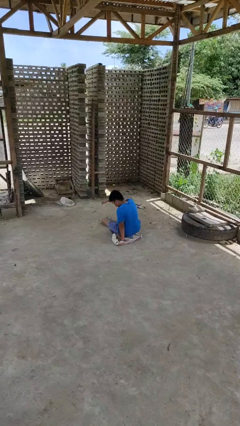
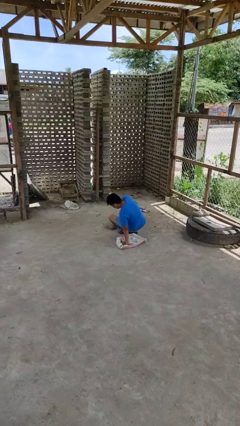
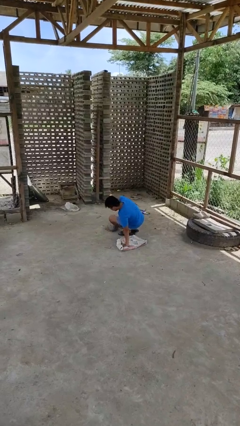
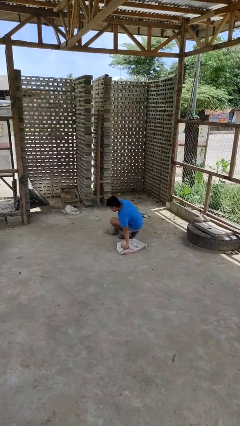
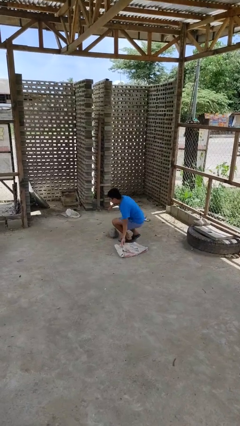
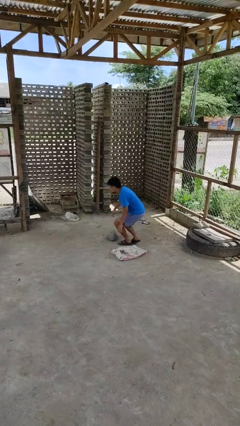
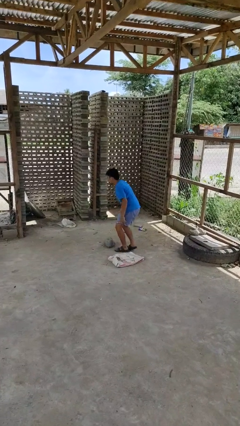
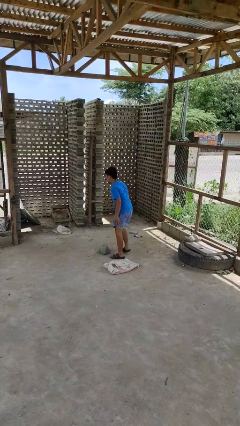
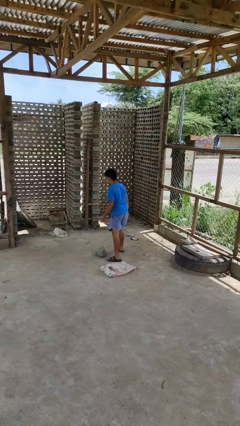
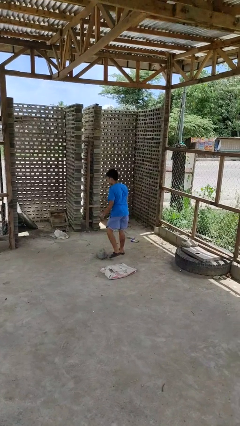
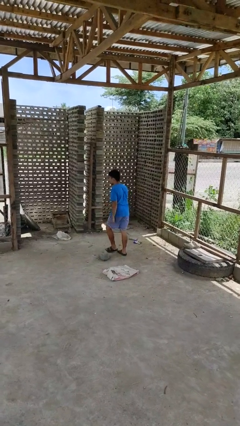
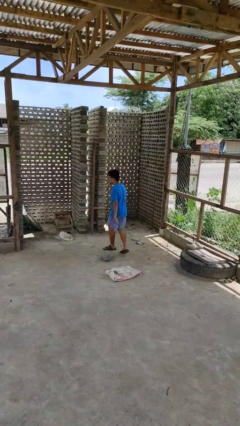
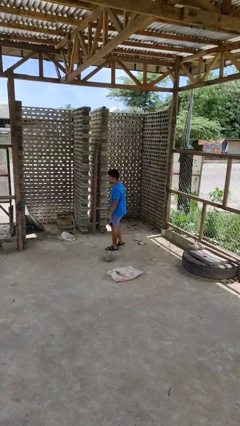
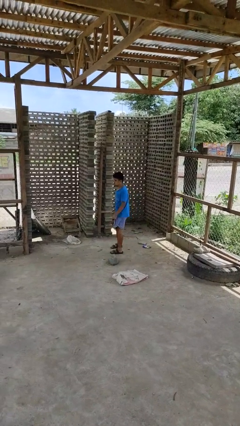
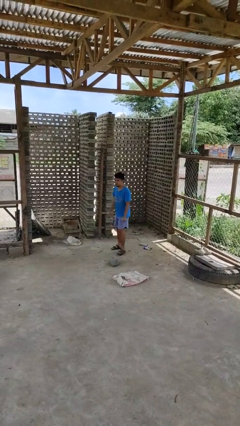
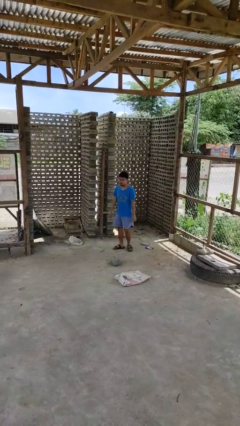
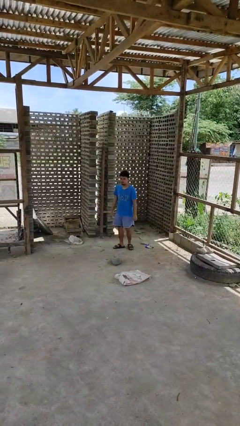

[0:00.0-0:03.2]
person stands up from floor

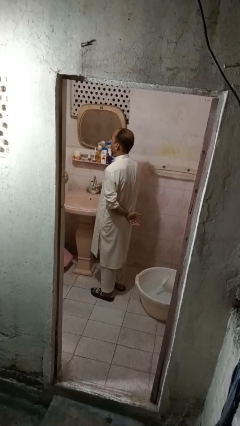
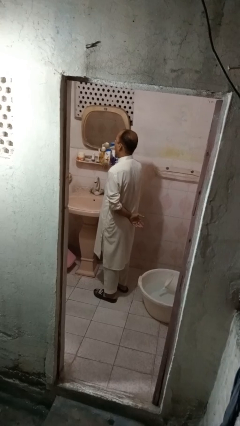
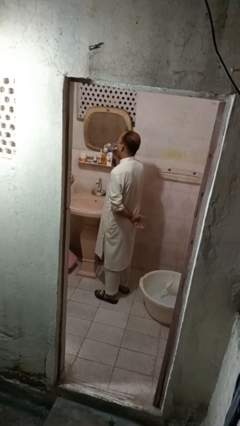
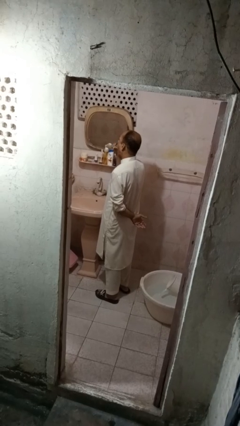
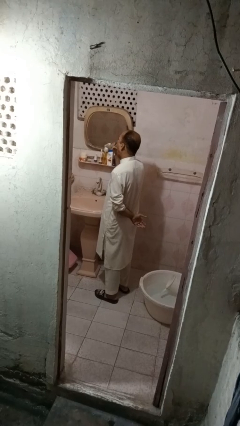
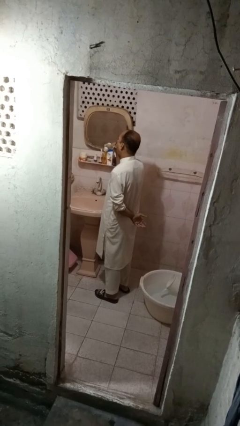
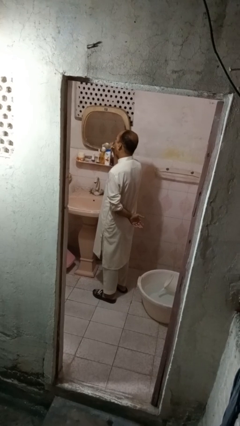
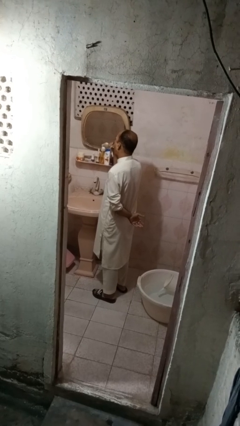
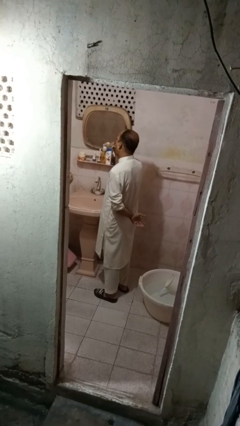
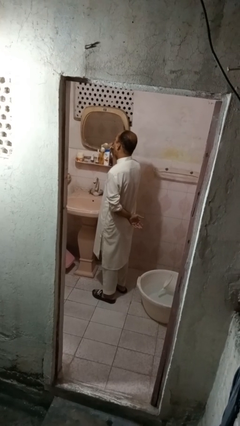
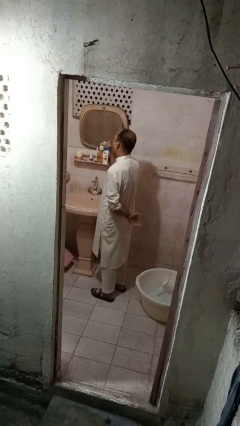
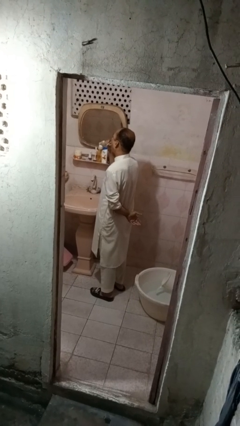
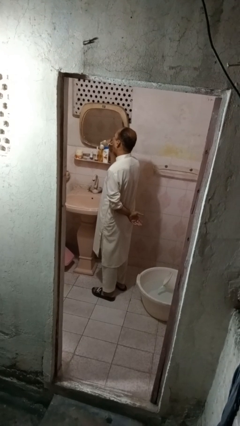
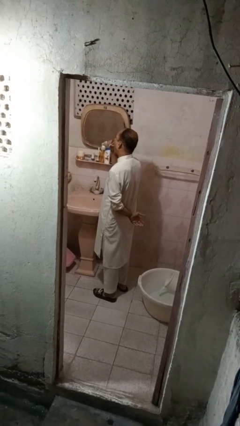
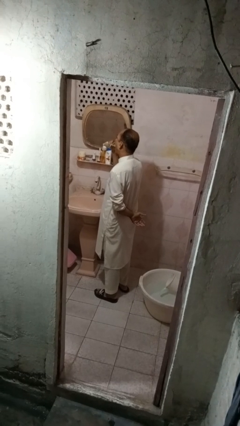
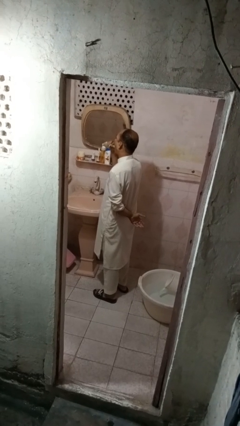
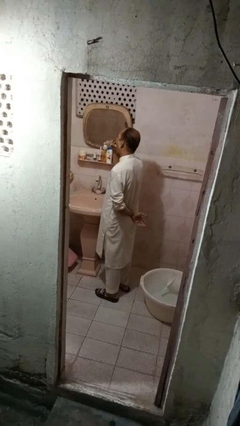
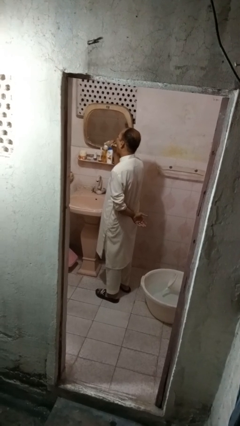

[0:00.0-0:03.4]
person brushes teeth

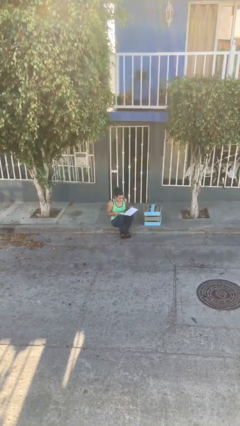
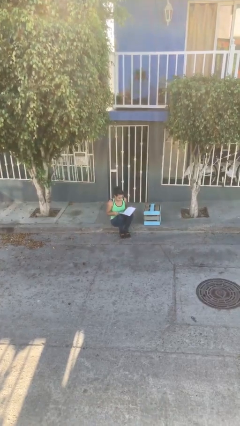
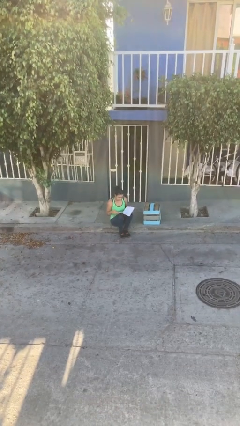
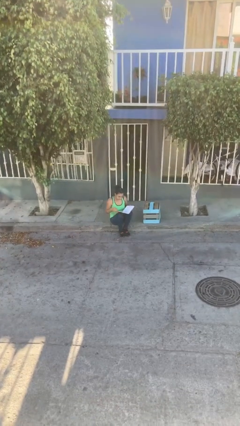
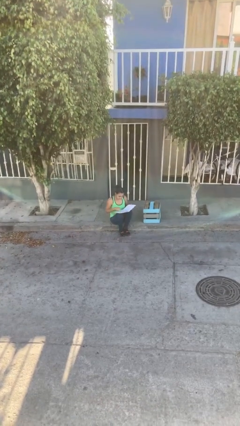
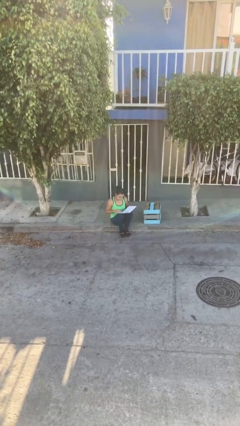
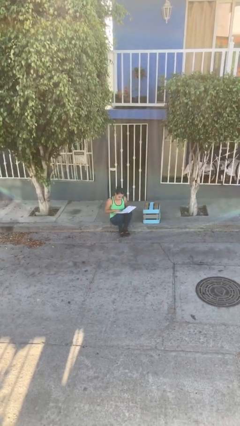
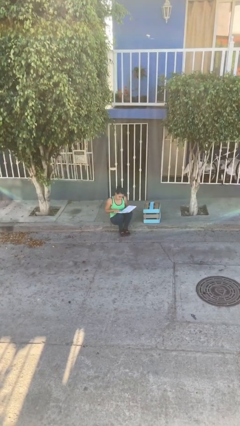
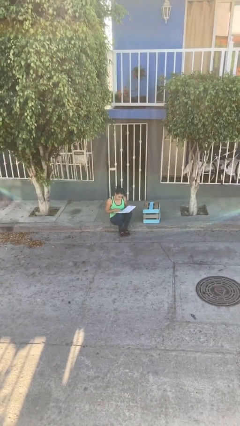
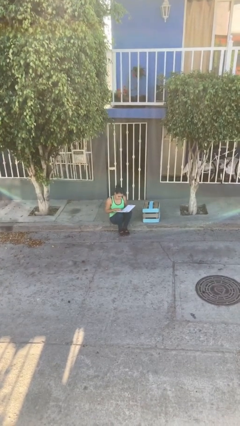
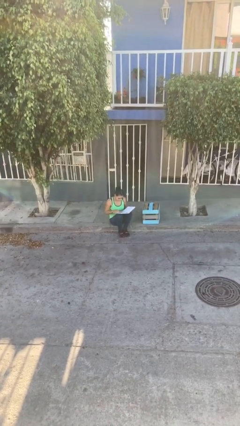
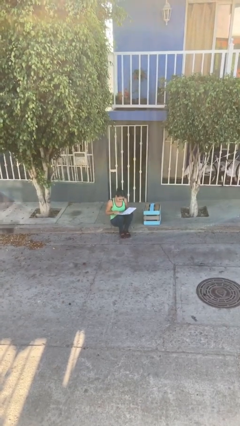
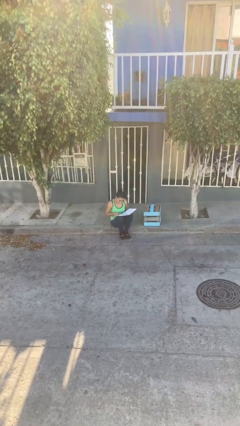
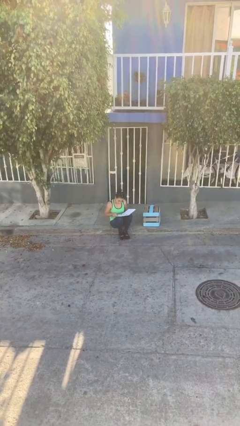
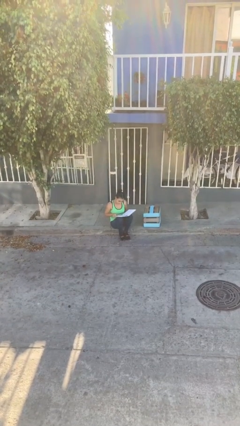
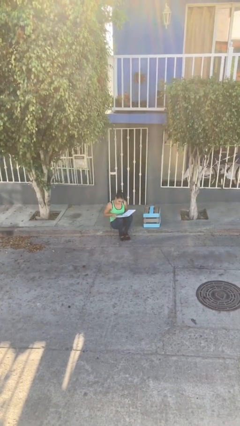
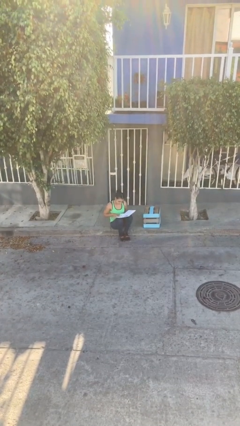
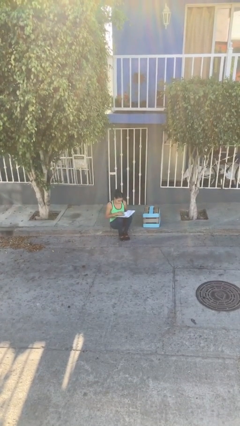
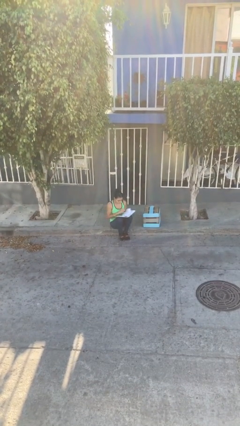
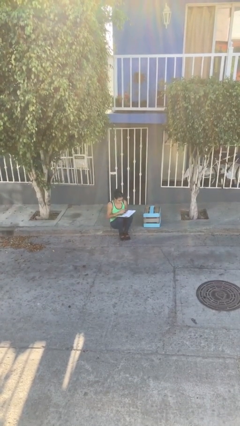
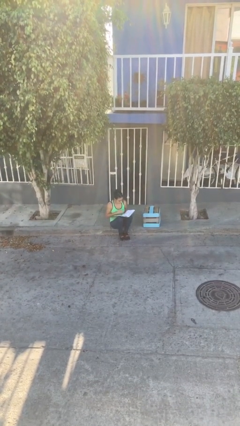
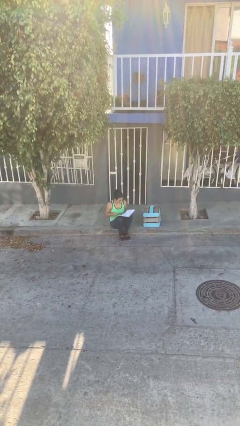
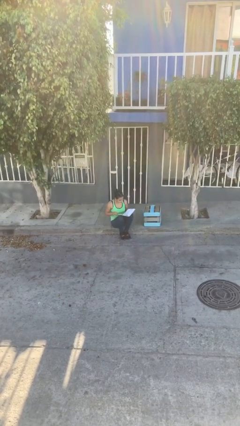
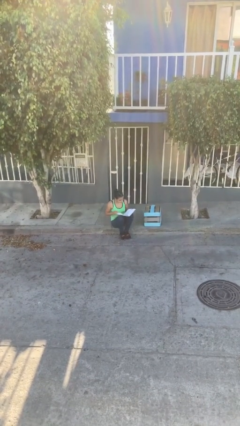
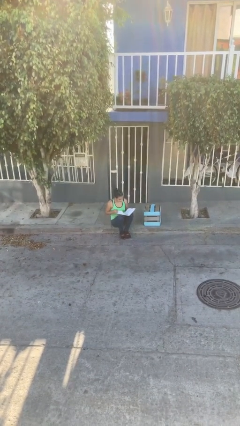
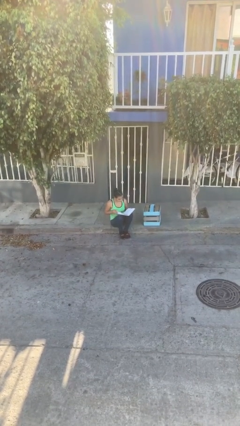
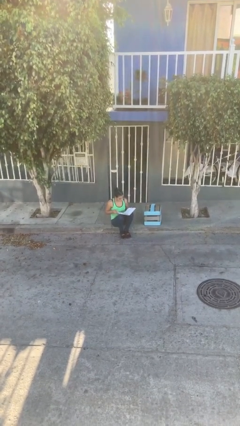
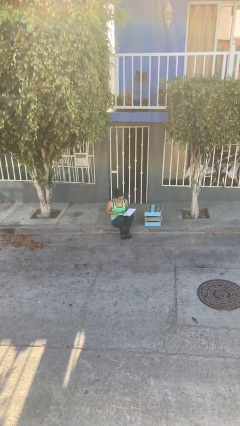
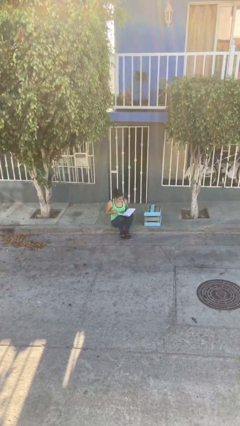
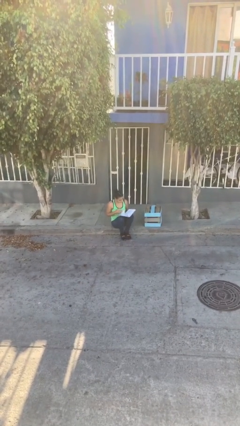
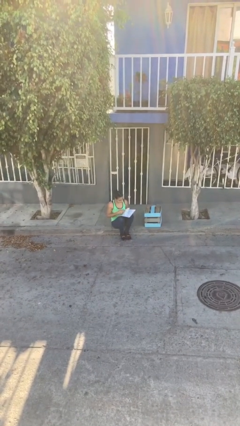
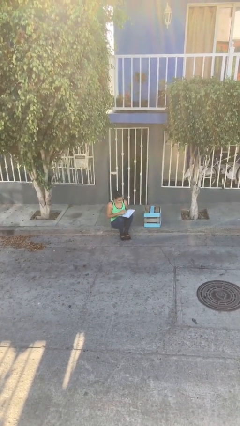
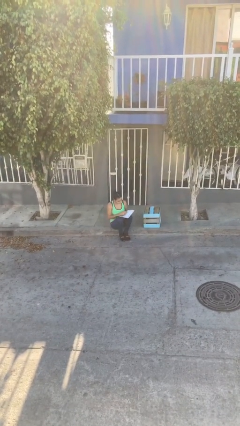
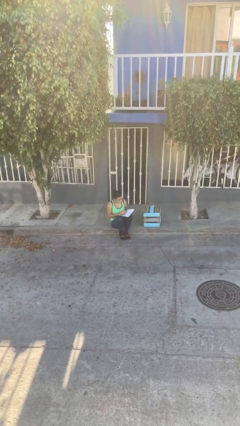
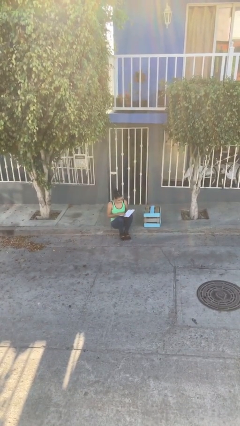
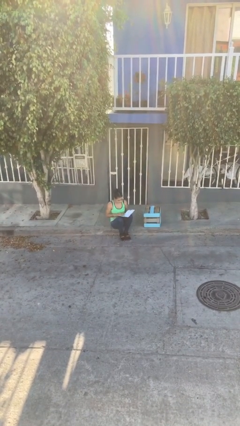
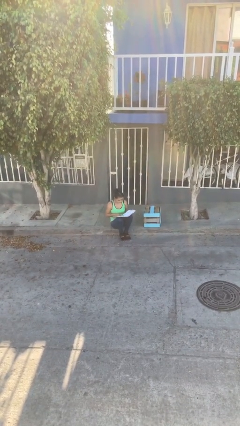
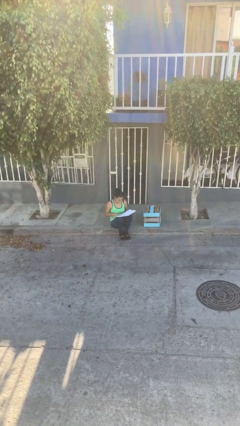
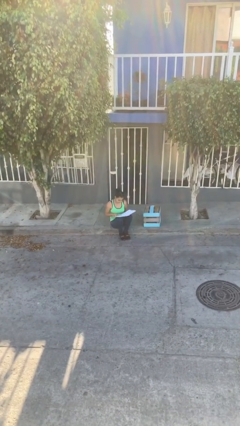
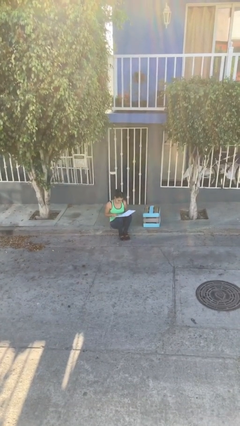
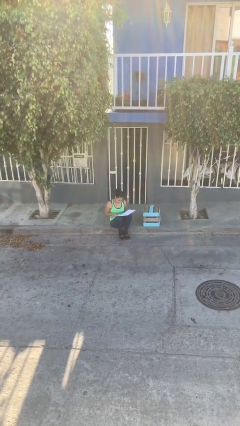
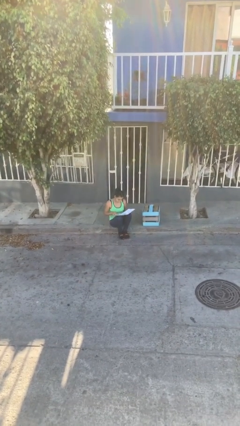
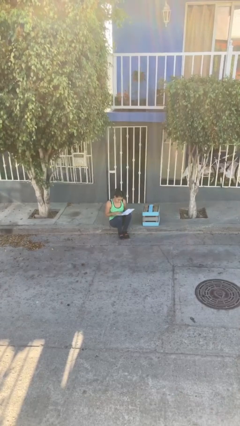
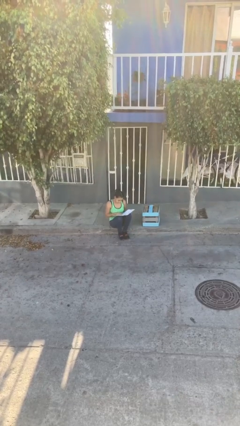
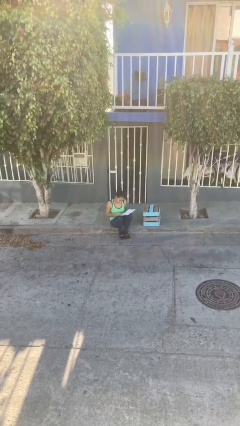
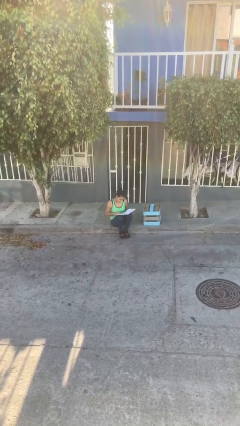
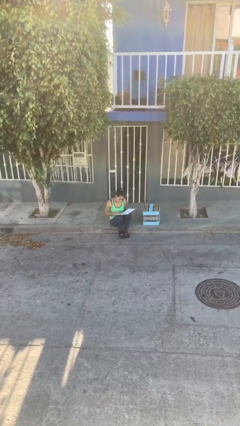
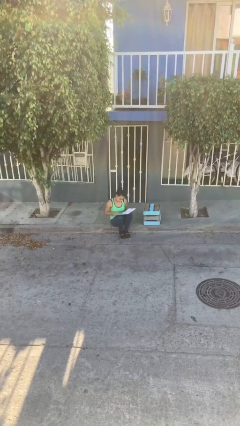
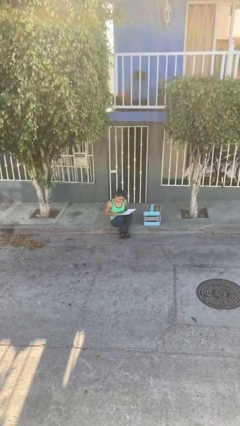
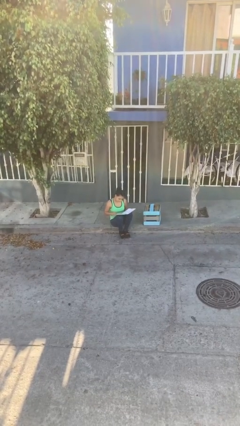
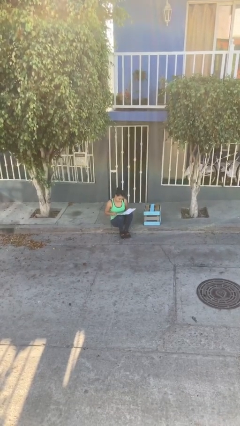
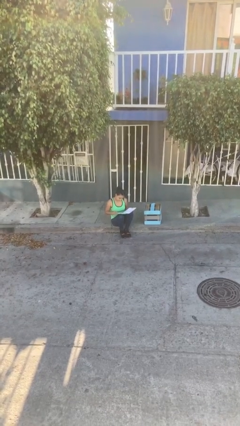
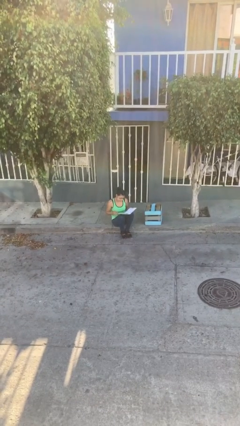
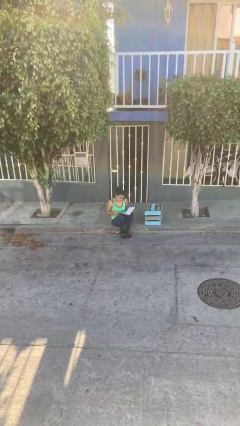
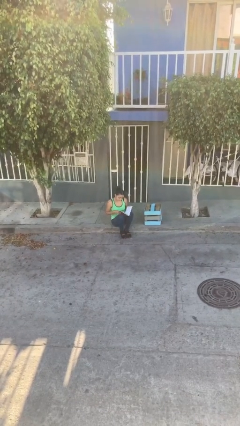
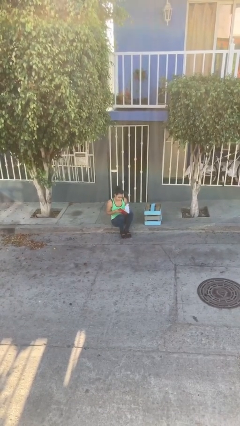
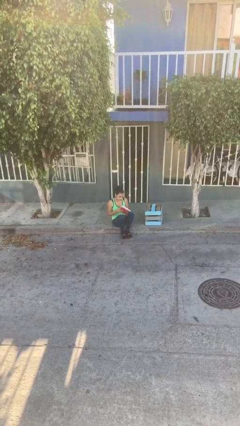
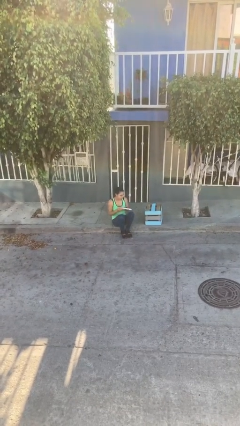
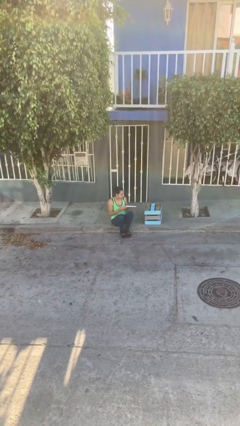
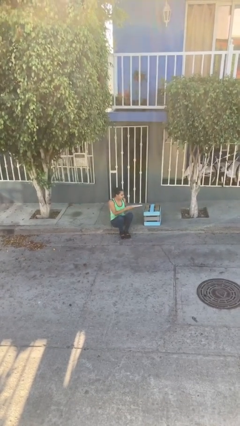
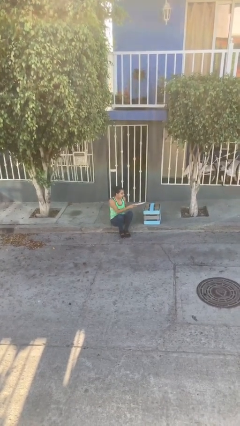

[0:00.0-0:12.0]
person reads document
